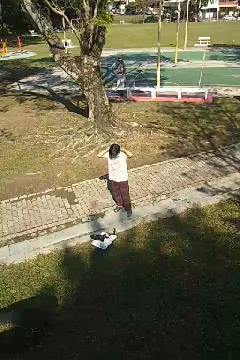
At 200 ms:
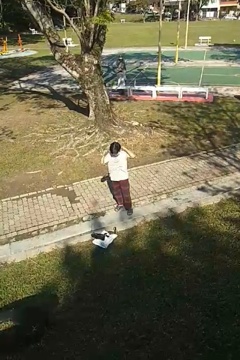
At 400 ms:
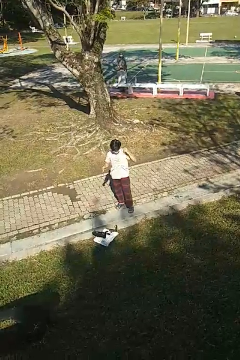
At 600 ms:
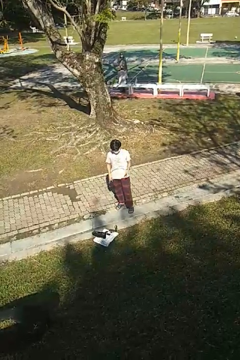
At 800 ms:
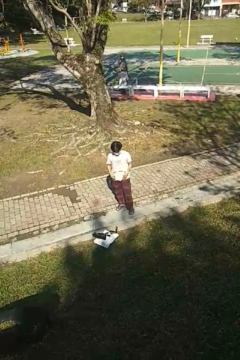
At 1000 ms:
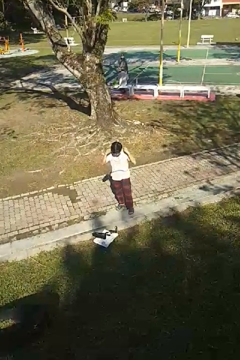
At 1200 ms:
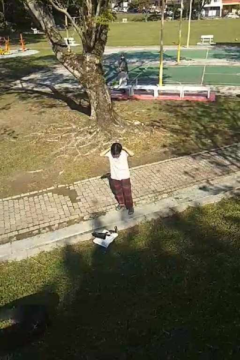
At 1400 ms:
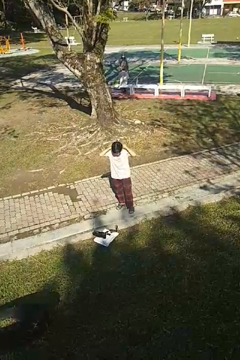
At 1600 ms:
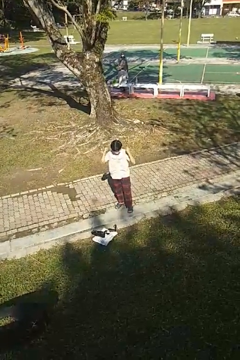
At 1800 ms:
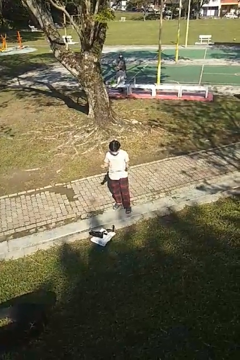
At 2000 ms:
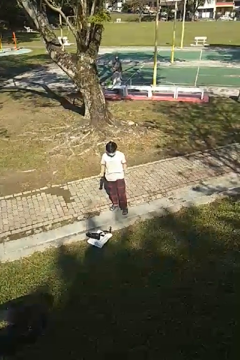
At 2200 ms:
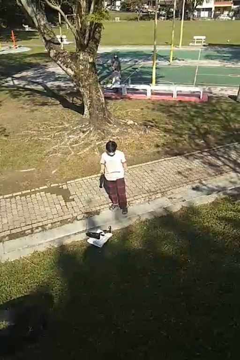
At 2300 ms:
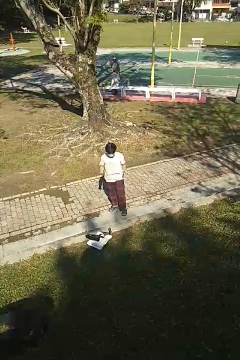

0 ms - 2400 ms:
person takes off necklace

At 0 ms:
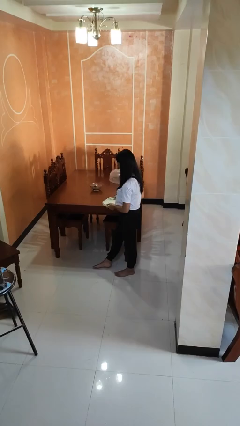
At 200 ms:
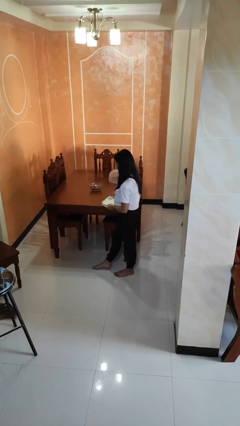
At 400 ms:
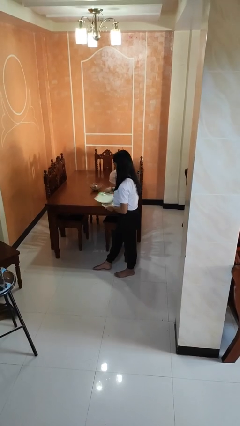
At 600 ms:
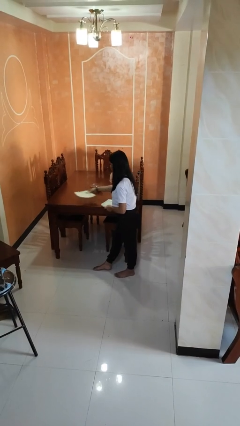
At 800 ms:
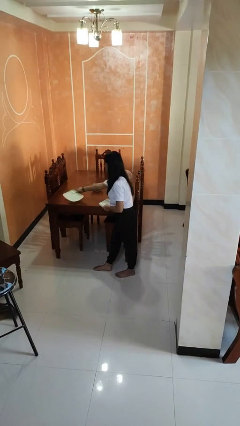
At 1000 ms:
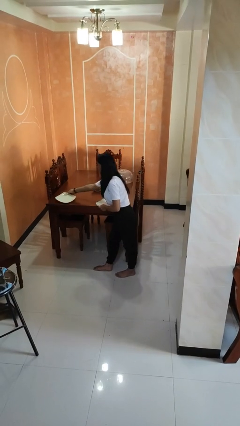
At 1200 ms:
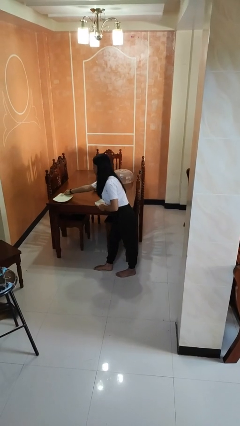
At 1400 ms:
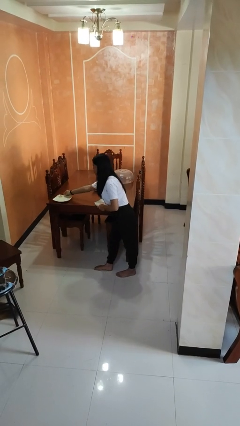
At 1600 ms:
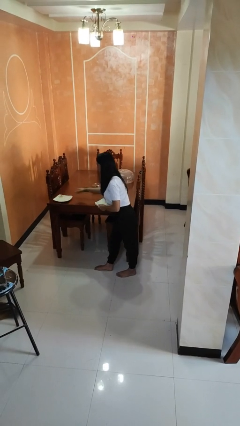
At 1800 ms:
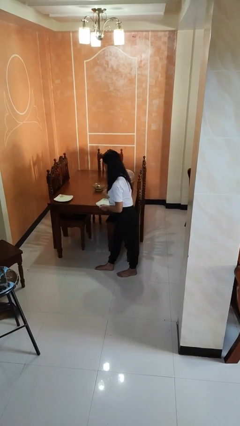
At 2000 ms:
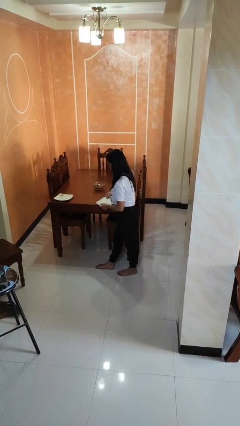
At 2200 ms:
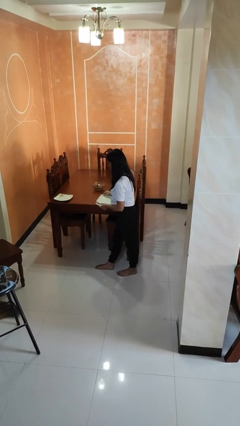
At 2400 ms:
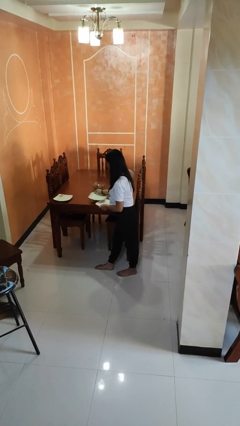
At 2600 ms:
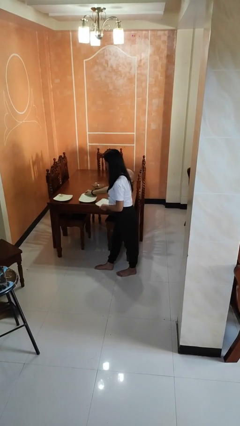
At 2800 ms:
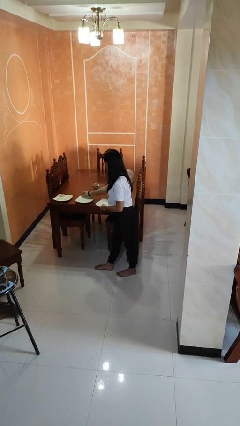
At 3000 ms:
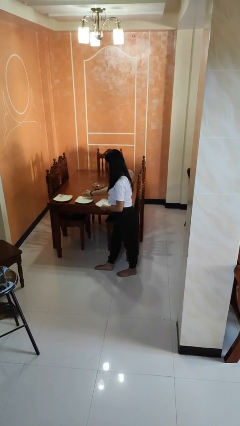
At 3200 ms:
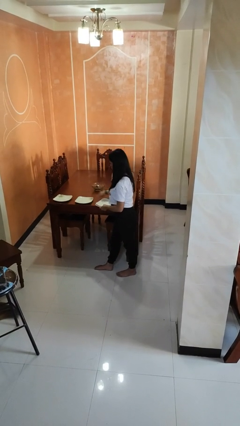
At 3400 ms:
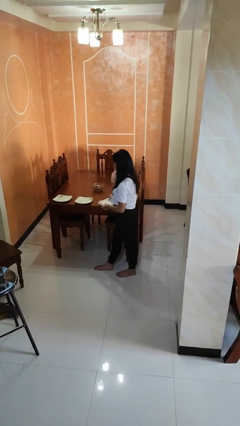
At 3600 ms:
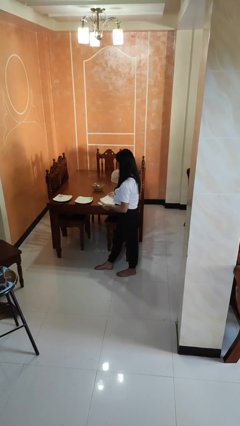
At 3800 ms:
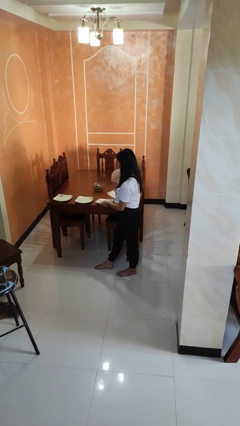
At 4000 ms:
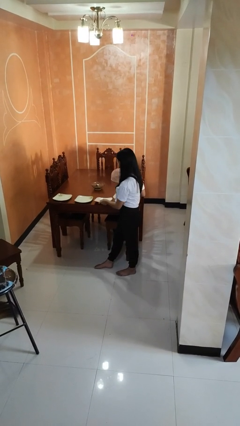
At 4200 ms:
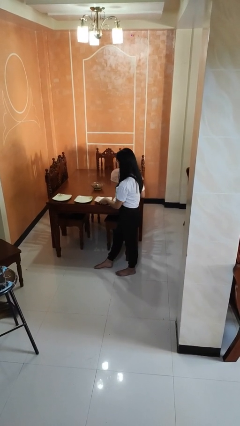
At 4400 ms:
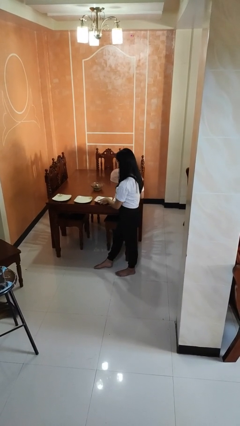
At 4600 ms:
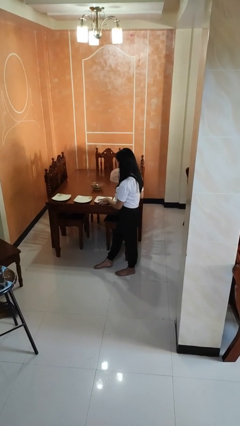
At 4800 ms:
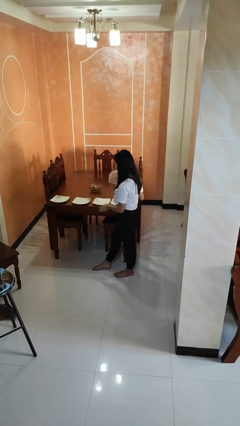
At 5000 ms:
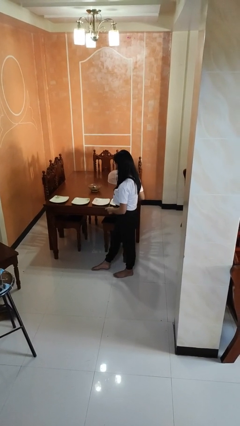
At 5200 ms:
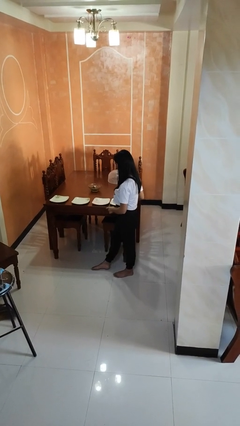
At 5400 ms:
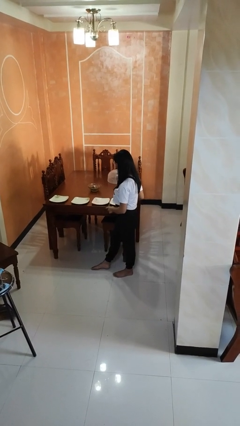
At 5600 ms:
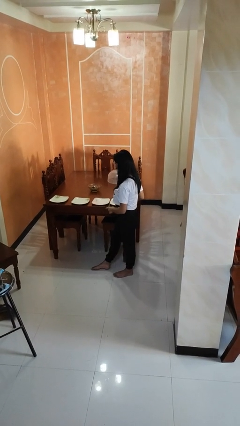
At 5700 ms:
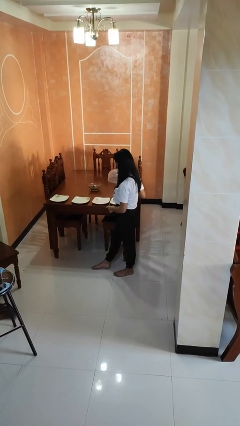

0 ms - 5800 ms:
person sets table

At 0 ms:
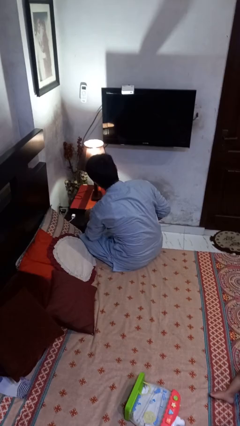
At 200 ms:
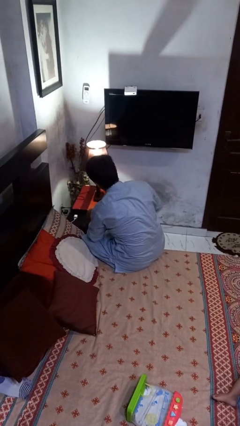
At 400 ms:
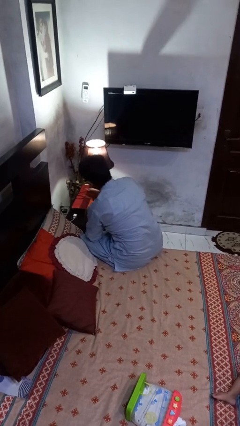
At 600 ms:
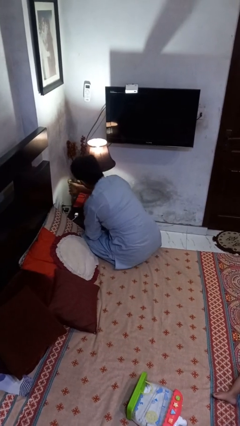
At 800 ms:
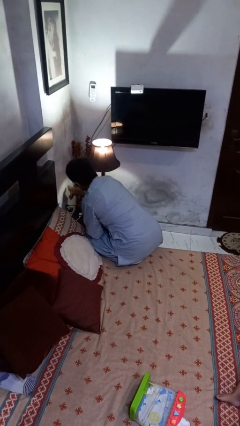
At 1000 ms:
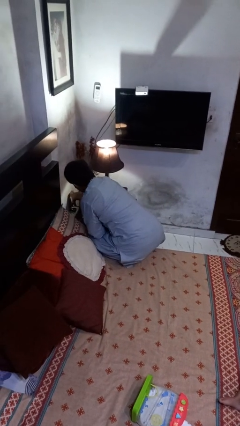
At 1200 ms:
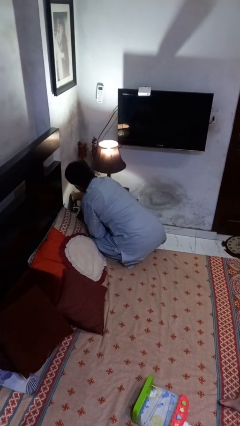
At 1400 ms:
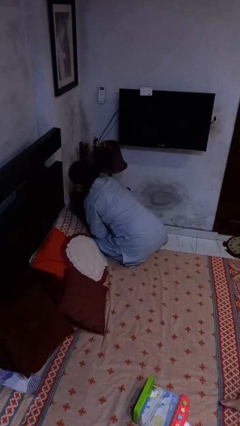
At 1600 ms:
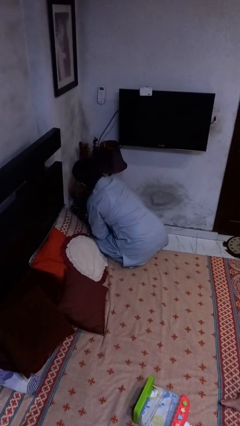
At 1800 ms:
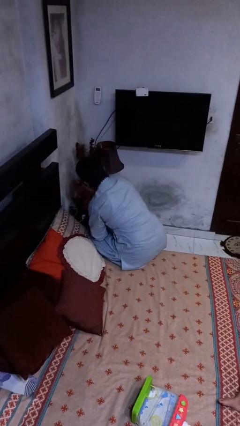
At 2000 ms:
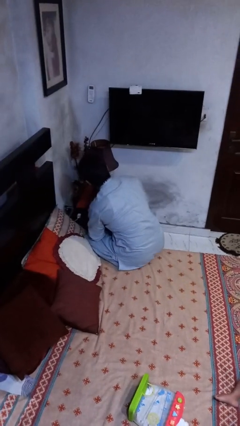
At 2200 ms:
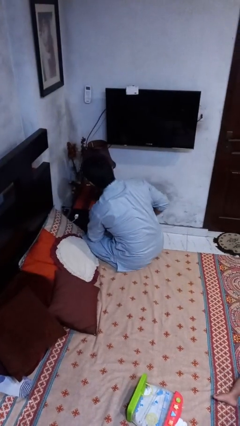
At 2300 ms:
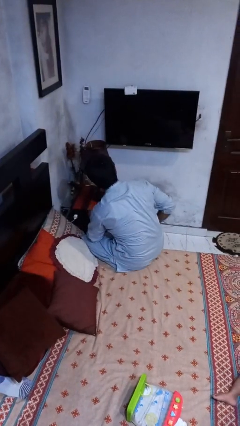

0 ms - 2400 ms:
person turns off lamp

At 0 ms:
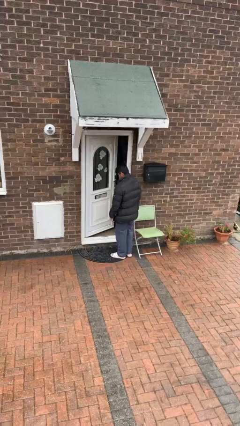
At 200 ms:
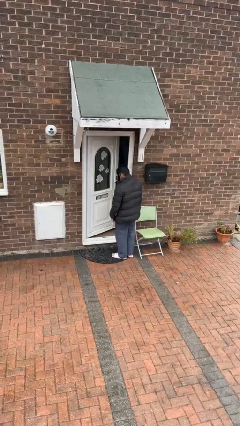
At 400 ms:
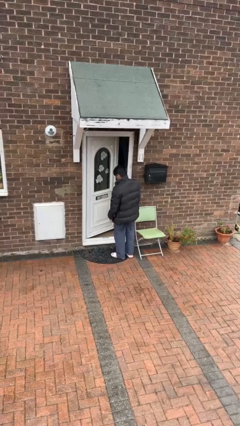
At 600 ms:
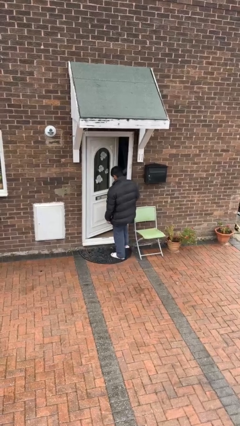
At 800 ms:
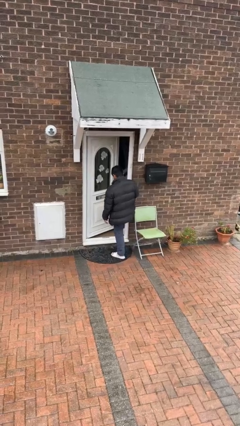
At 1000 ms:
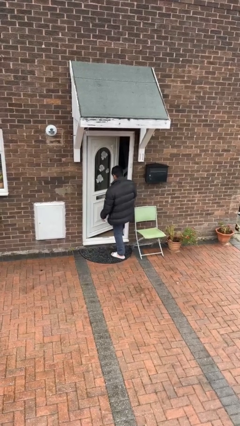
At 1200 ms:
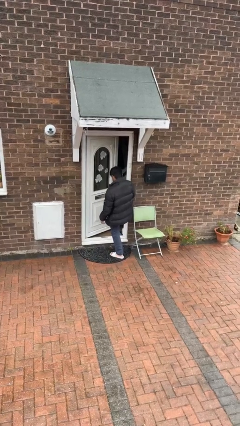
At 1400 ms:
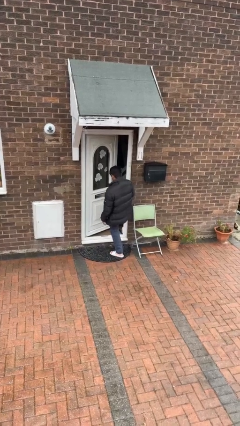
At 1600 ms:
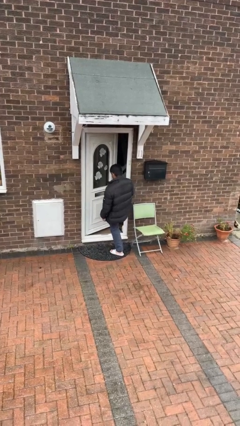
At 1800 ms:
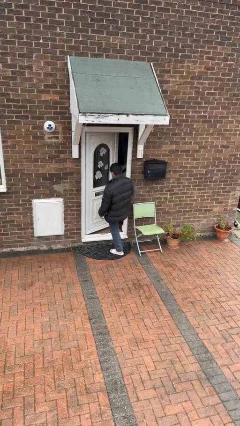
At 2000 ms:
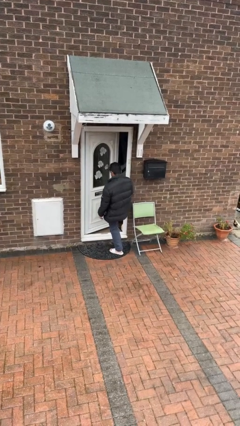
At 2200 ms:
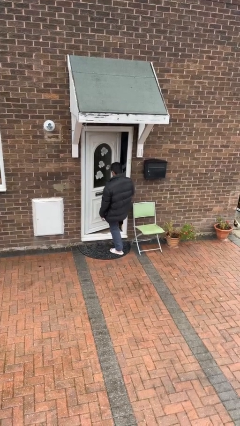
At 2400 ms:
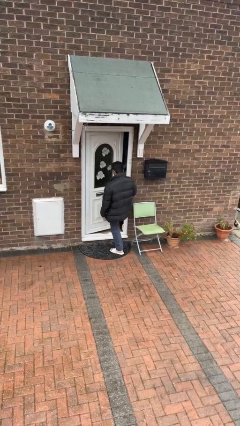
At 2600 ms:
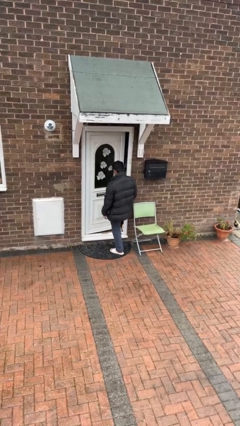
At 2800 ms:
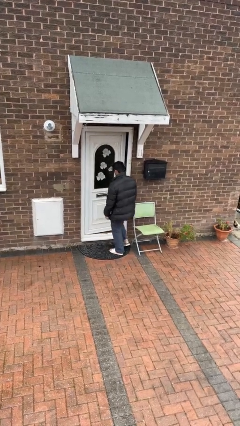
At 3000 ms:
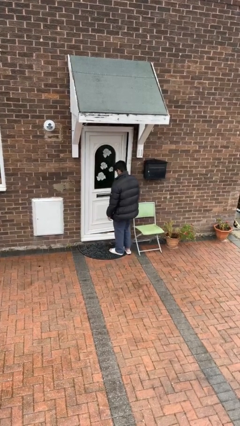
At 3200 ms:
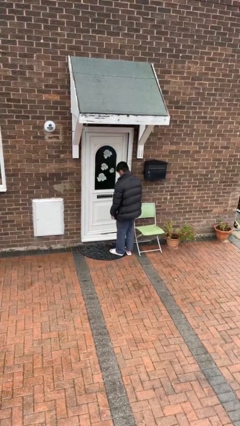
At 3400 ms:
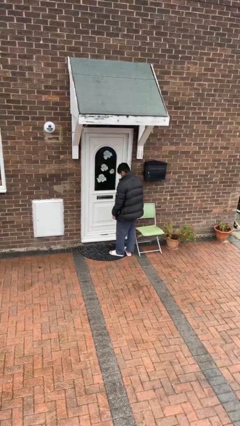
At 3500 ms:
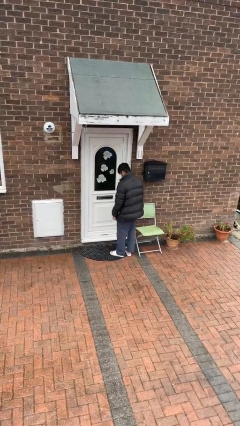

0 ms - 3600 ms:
person closes door with foot

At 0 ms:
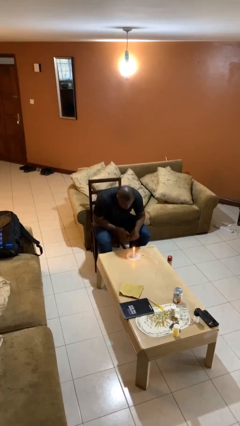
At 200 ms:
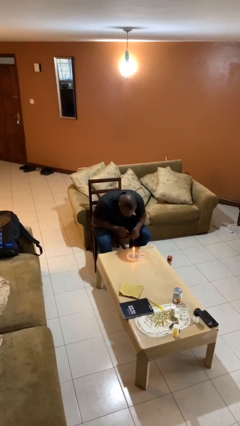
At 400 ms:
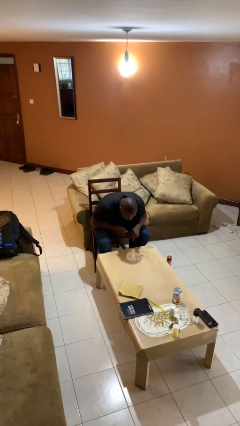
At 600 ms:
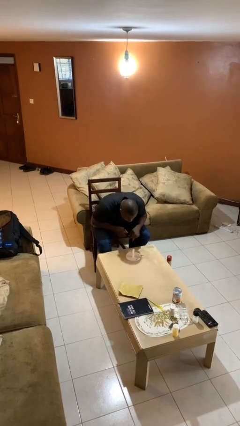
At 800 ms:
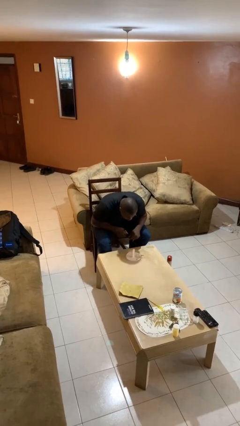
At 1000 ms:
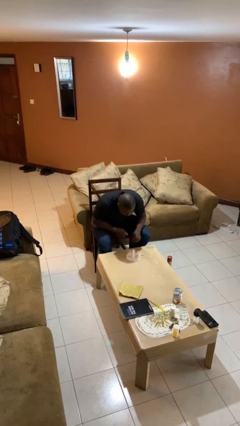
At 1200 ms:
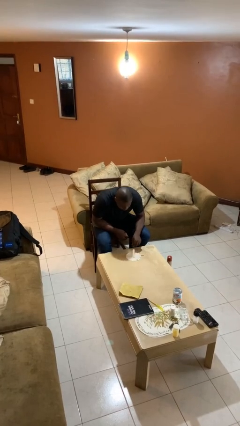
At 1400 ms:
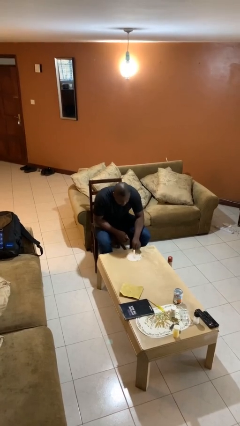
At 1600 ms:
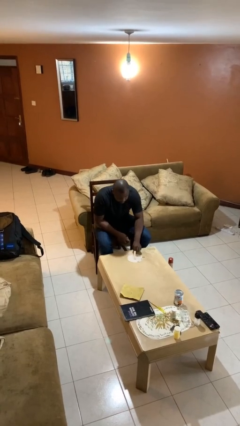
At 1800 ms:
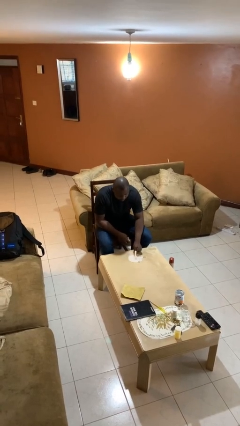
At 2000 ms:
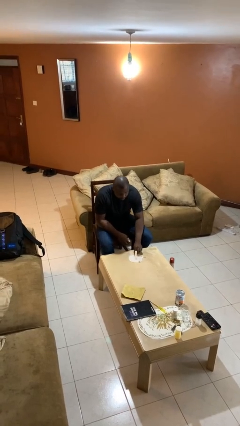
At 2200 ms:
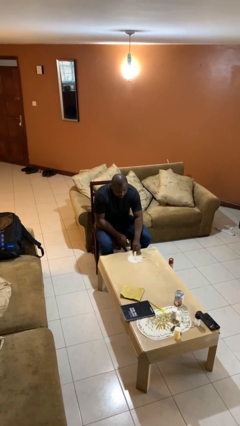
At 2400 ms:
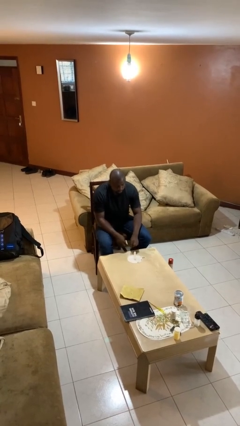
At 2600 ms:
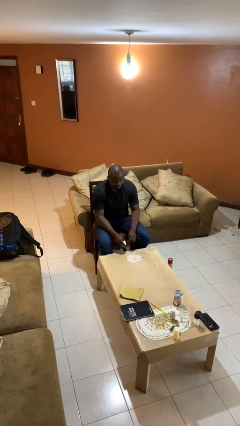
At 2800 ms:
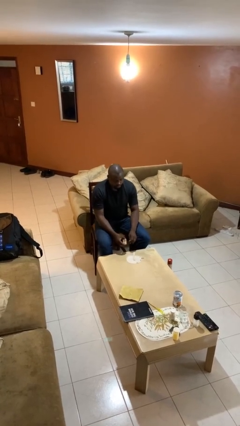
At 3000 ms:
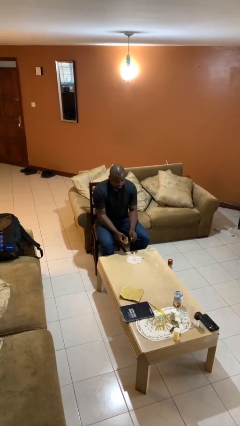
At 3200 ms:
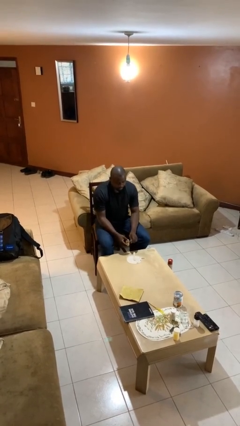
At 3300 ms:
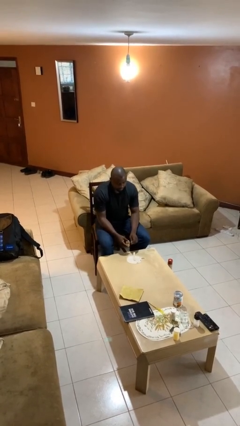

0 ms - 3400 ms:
person extinguishes candle

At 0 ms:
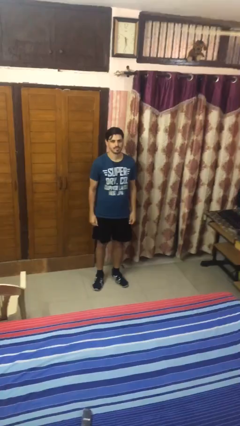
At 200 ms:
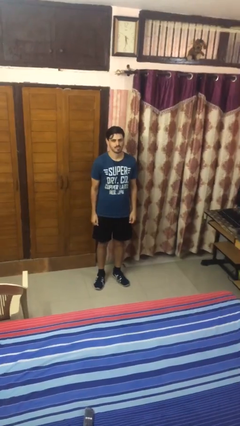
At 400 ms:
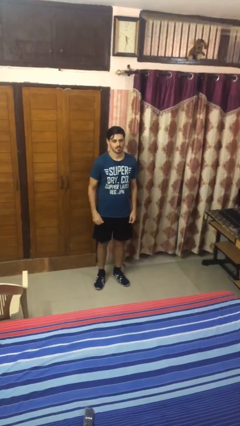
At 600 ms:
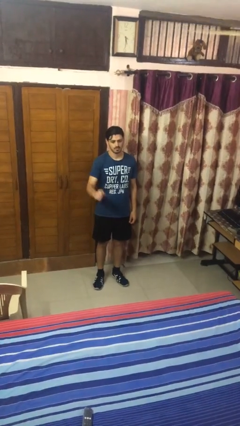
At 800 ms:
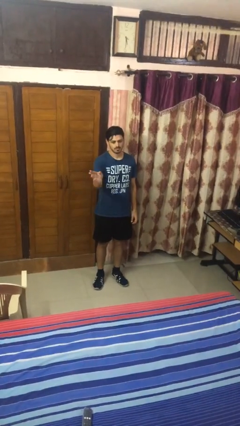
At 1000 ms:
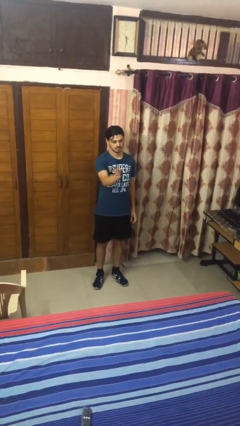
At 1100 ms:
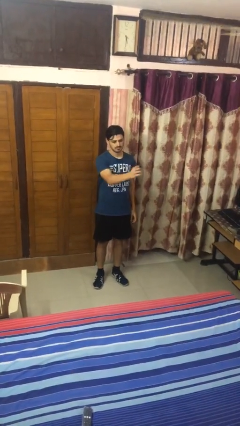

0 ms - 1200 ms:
person gestures swipe left
